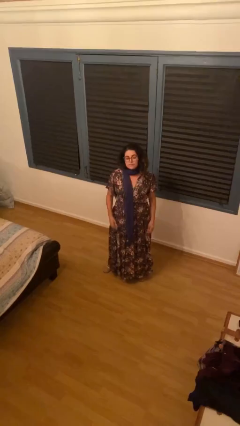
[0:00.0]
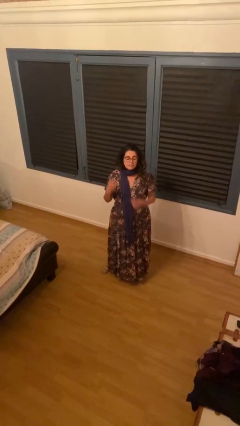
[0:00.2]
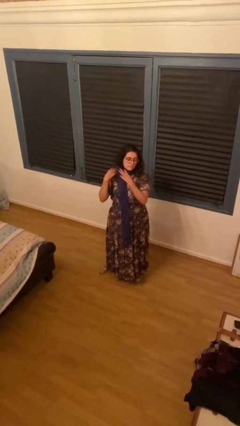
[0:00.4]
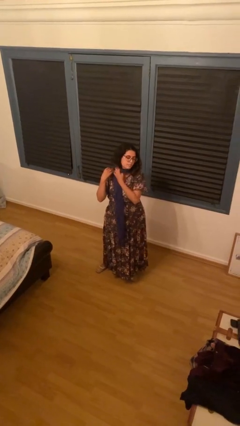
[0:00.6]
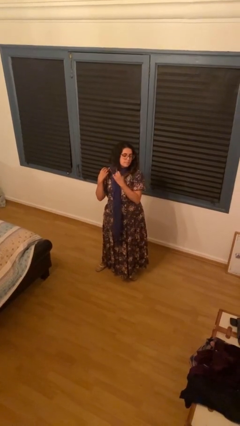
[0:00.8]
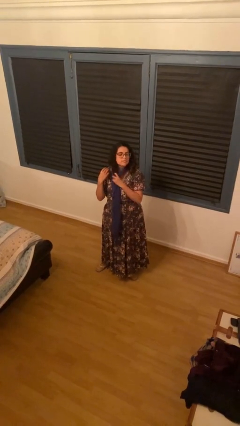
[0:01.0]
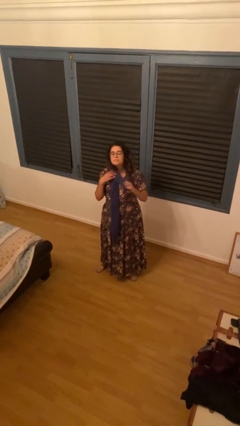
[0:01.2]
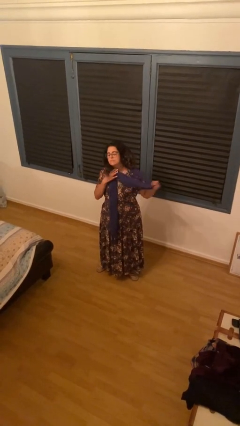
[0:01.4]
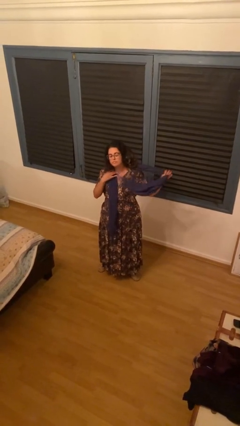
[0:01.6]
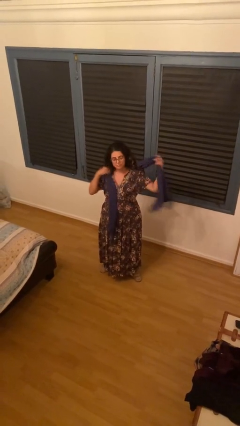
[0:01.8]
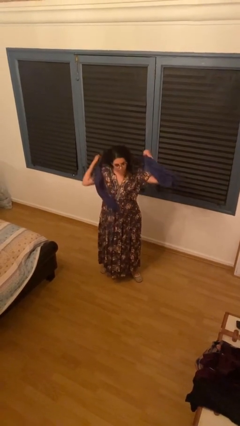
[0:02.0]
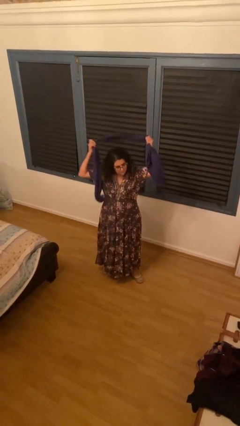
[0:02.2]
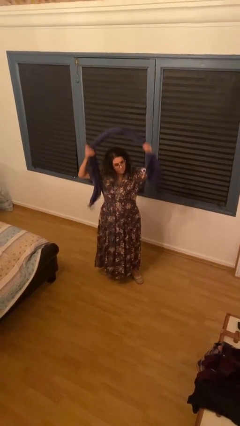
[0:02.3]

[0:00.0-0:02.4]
person takes off scarf

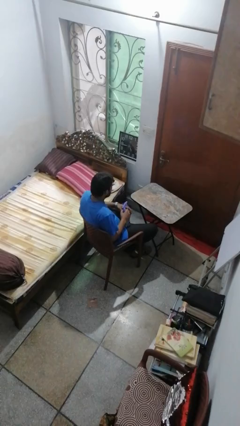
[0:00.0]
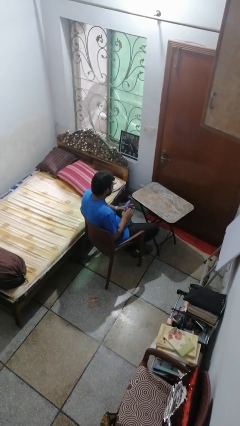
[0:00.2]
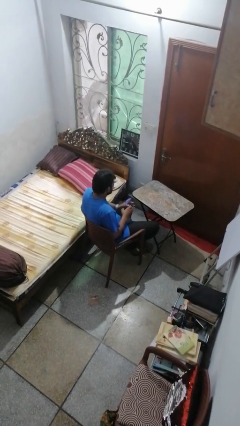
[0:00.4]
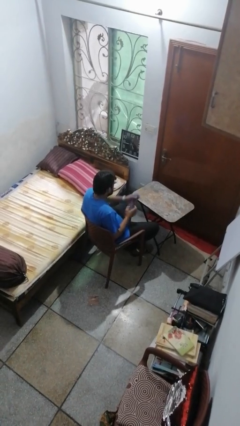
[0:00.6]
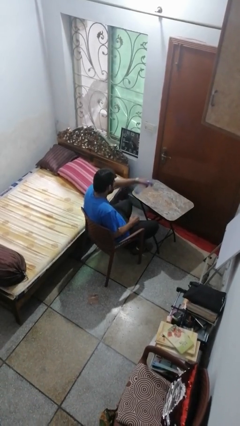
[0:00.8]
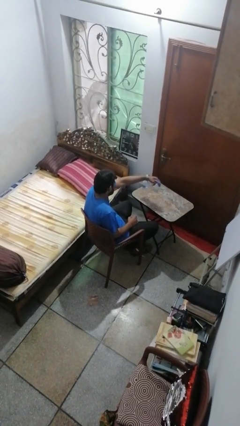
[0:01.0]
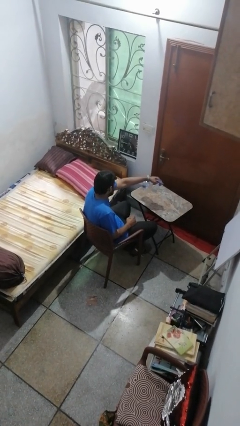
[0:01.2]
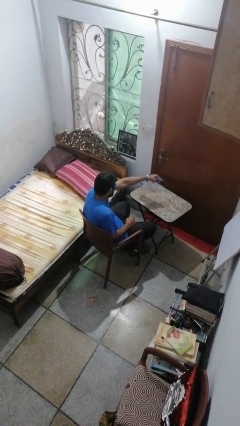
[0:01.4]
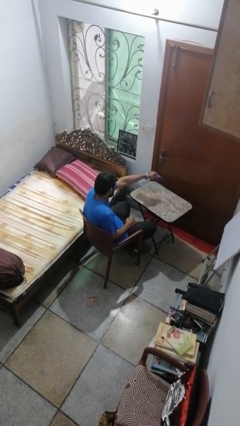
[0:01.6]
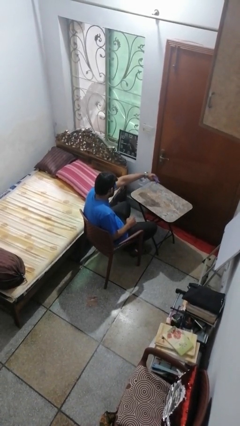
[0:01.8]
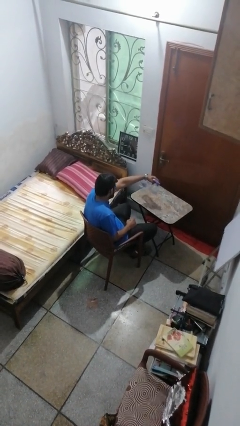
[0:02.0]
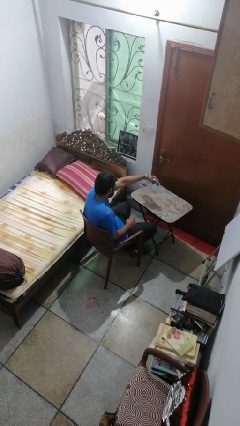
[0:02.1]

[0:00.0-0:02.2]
person sprays from bottle

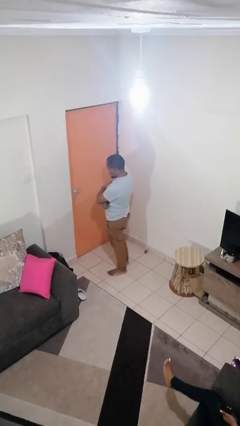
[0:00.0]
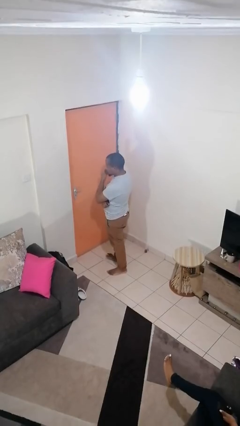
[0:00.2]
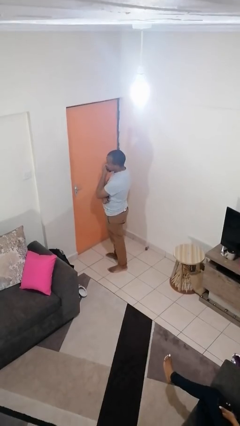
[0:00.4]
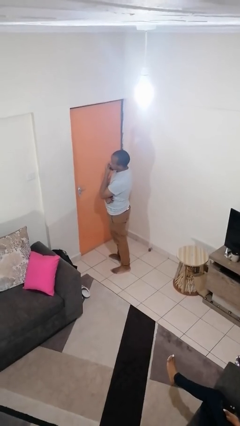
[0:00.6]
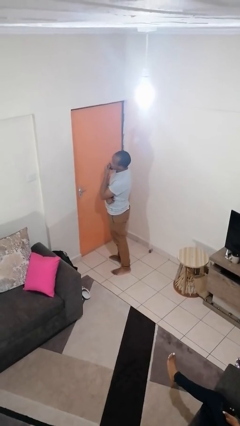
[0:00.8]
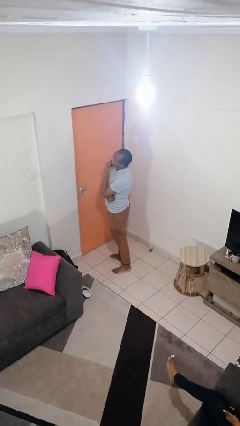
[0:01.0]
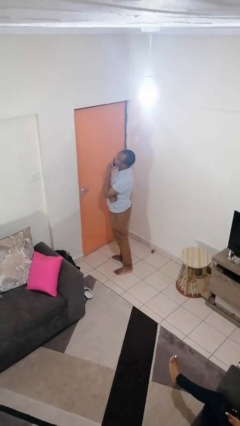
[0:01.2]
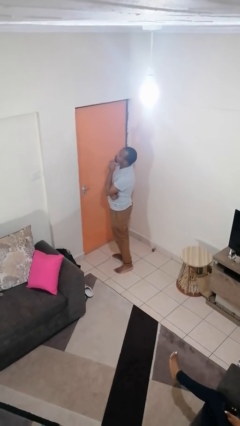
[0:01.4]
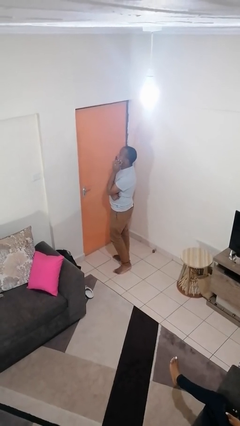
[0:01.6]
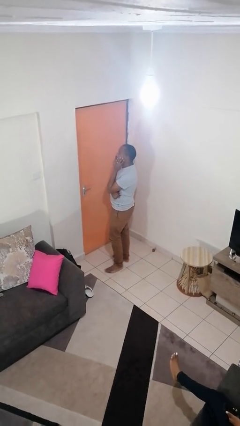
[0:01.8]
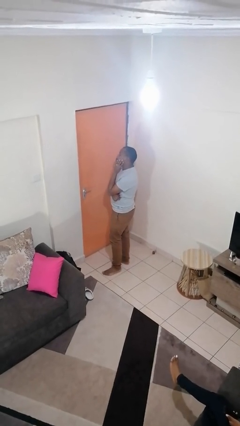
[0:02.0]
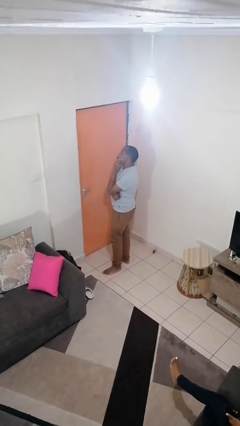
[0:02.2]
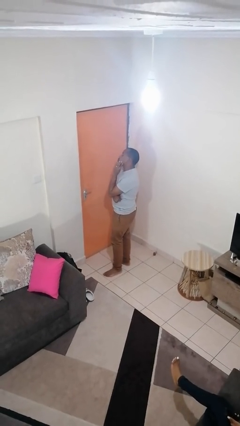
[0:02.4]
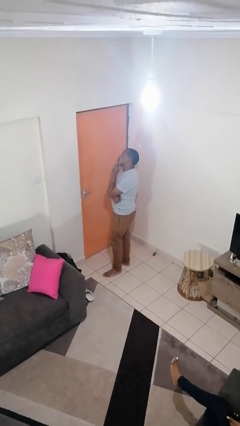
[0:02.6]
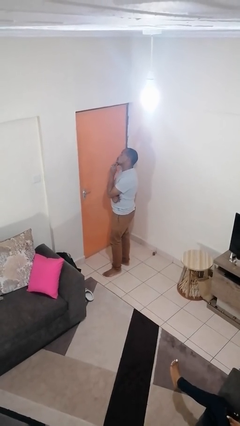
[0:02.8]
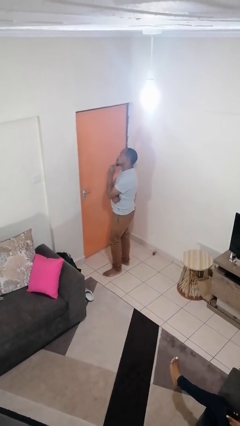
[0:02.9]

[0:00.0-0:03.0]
person strokes chin

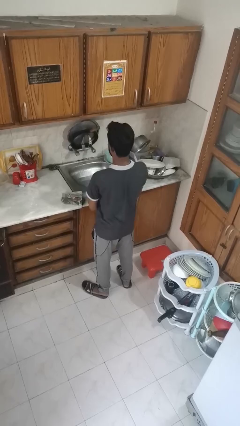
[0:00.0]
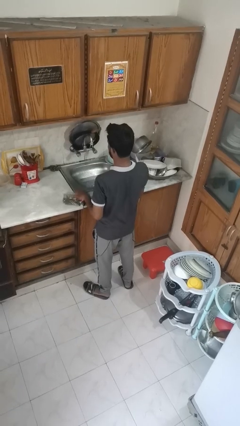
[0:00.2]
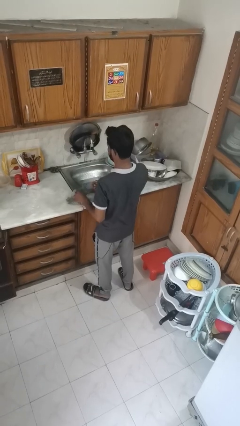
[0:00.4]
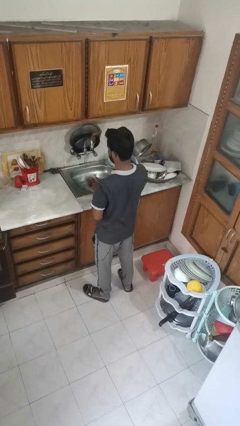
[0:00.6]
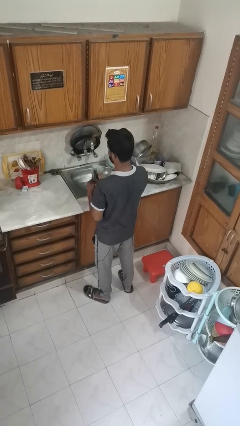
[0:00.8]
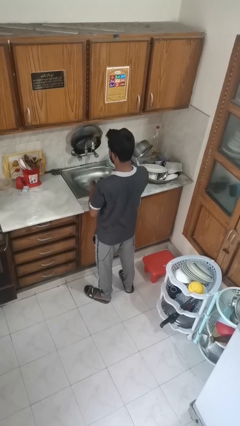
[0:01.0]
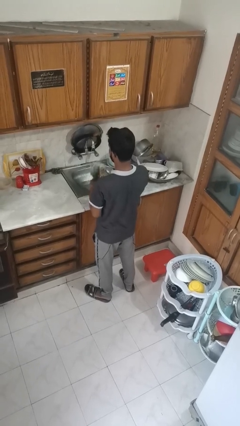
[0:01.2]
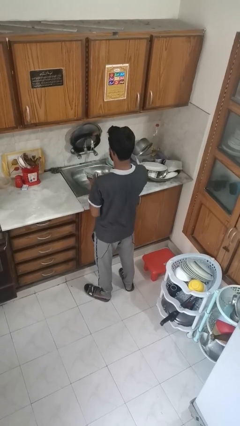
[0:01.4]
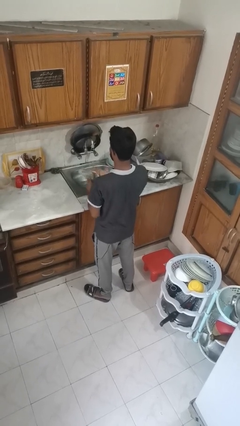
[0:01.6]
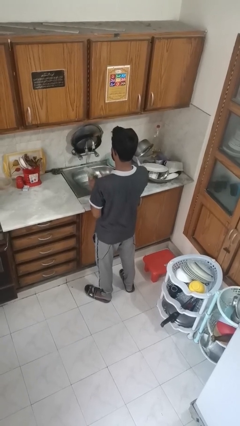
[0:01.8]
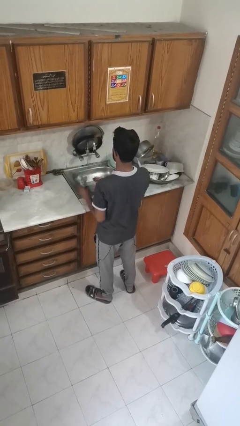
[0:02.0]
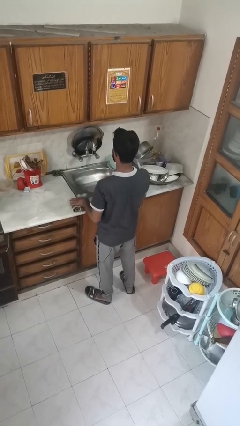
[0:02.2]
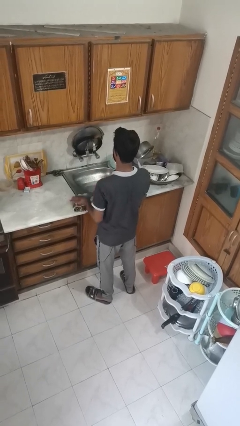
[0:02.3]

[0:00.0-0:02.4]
person dries hands with towel

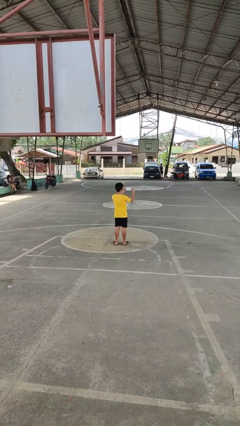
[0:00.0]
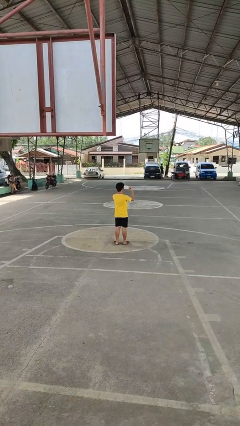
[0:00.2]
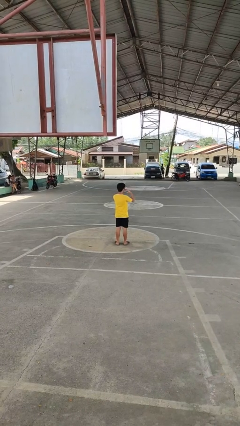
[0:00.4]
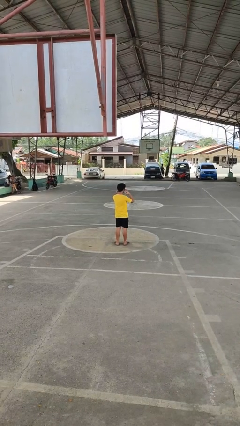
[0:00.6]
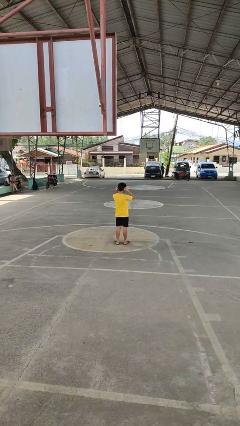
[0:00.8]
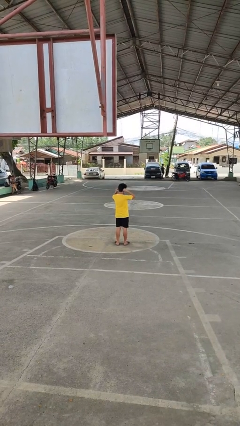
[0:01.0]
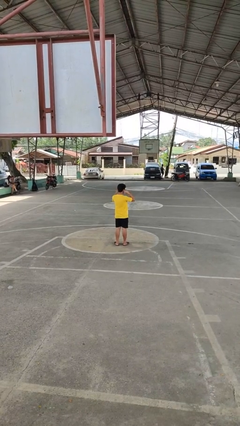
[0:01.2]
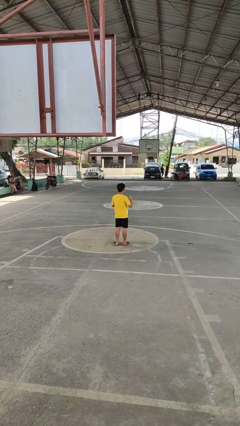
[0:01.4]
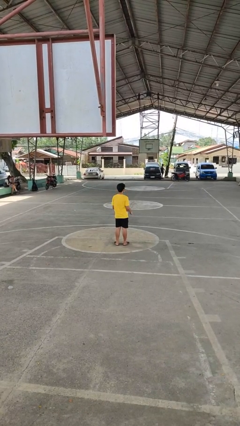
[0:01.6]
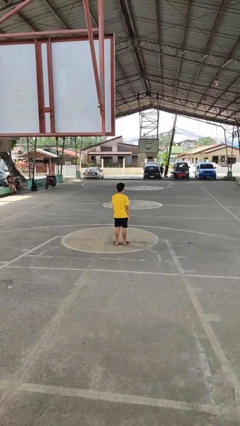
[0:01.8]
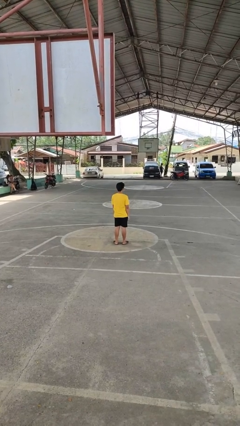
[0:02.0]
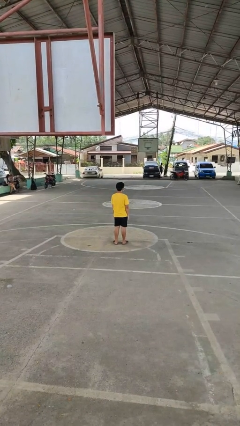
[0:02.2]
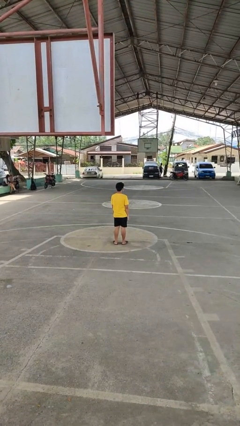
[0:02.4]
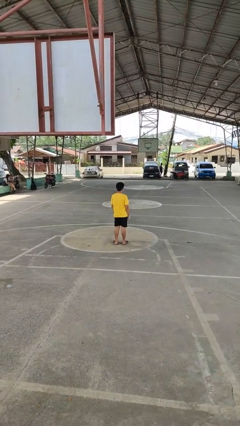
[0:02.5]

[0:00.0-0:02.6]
person puts on facemask

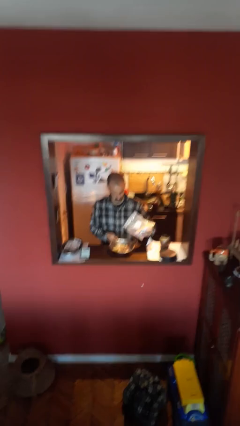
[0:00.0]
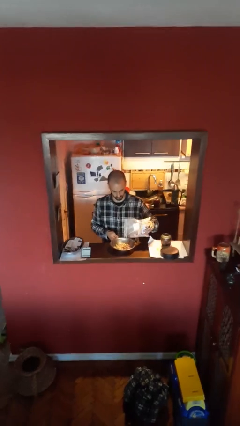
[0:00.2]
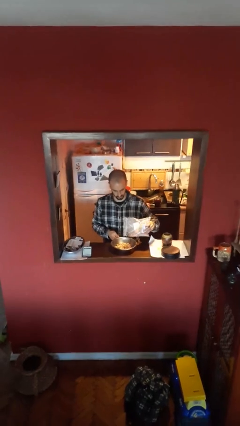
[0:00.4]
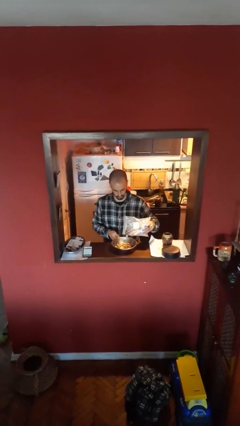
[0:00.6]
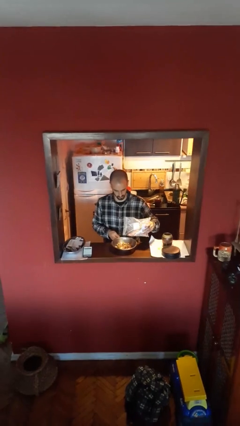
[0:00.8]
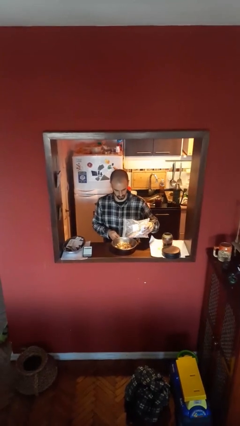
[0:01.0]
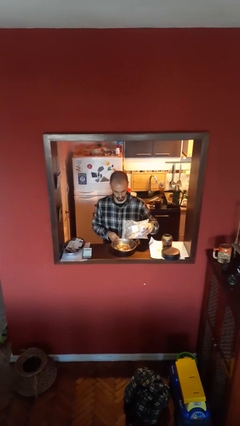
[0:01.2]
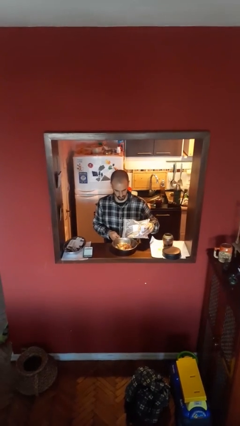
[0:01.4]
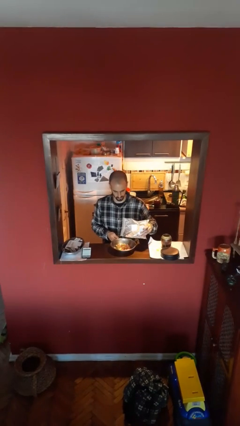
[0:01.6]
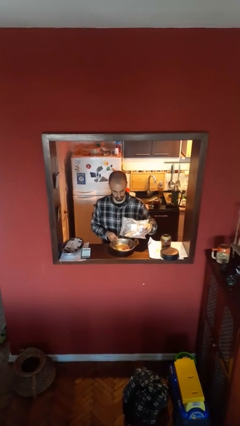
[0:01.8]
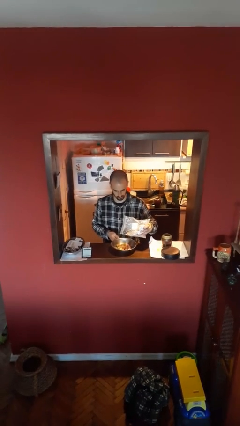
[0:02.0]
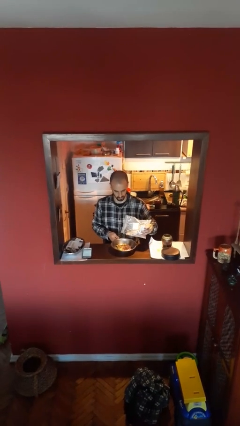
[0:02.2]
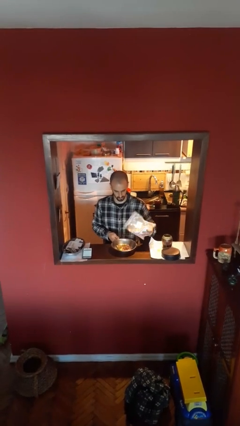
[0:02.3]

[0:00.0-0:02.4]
person pours into bowl

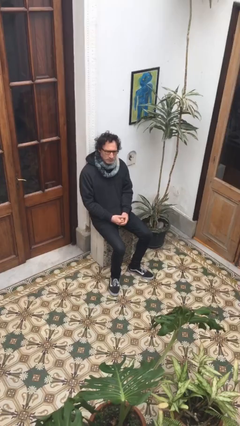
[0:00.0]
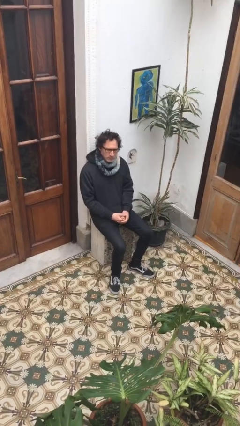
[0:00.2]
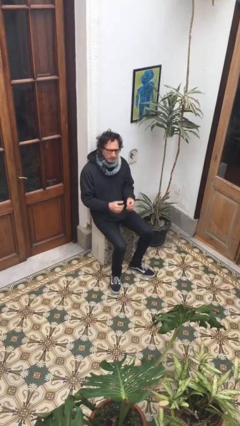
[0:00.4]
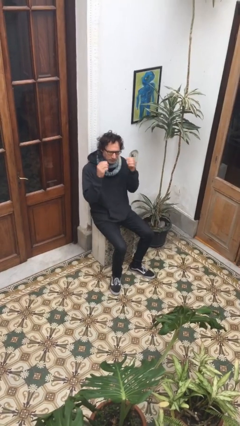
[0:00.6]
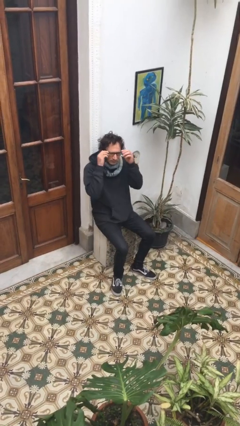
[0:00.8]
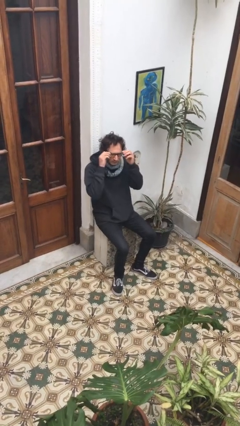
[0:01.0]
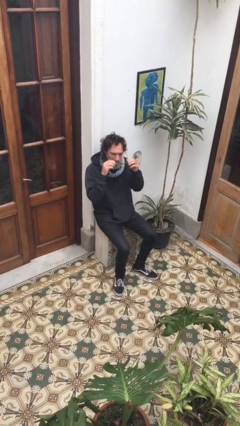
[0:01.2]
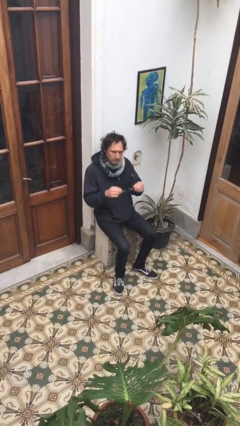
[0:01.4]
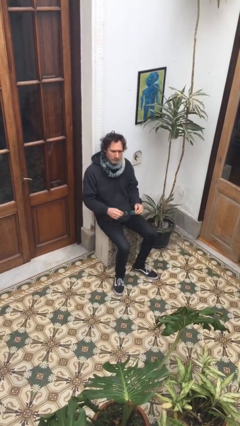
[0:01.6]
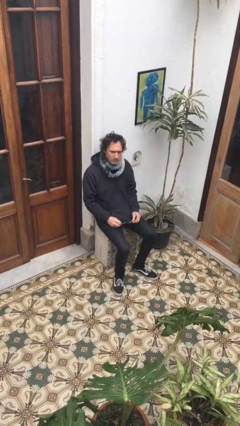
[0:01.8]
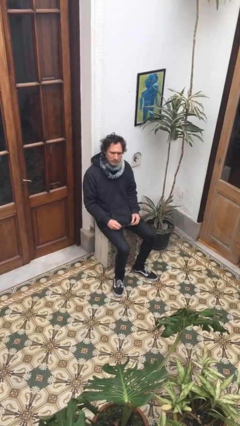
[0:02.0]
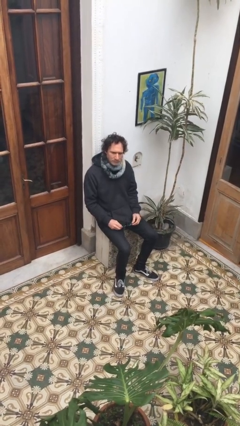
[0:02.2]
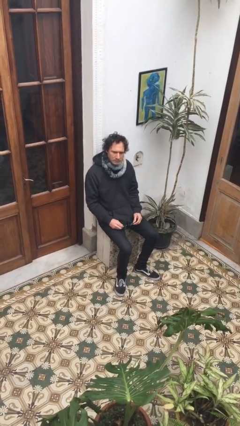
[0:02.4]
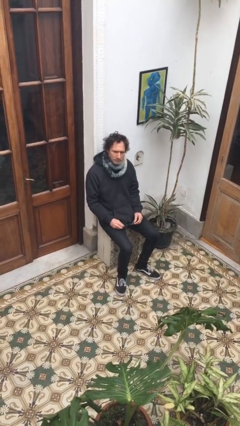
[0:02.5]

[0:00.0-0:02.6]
person takes off glasses
